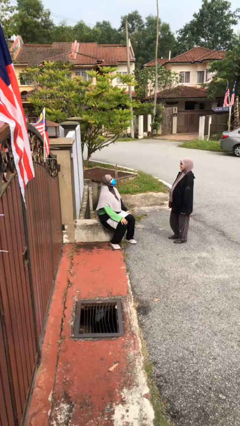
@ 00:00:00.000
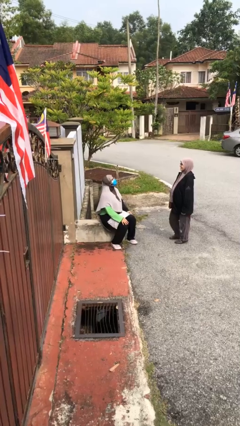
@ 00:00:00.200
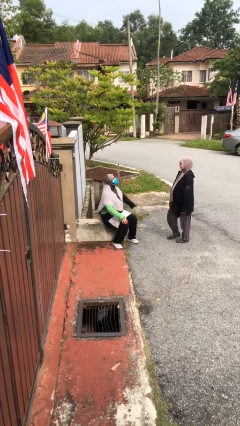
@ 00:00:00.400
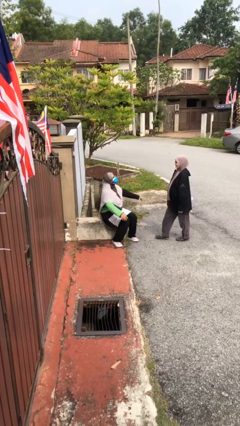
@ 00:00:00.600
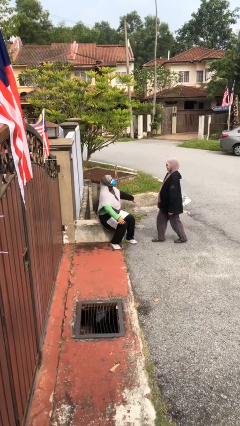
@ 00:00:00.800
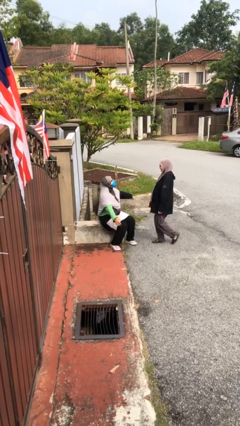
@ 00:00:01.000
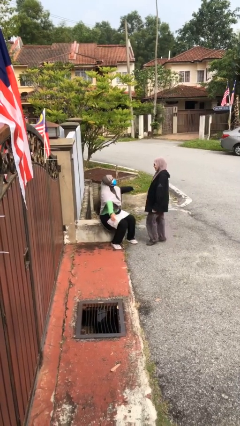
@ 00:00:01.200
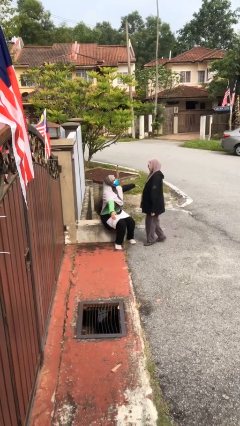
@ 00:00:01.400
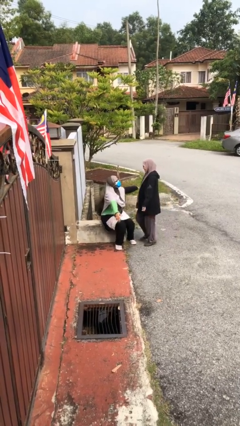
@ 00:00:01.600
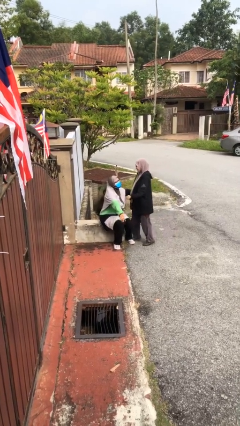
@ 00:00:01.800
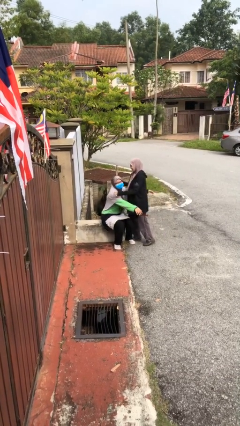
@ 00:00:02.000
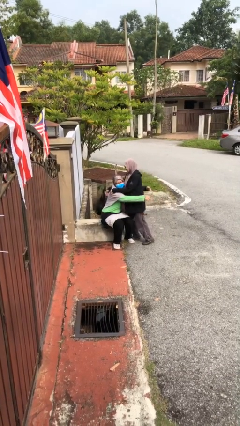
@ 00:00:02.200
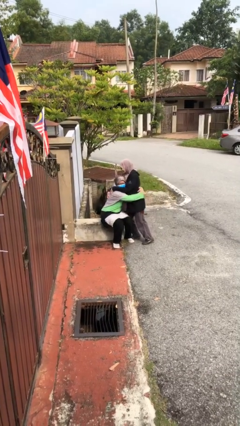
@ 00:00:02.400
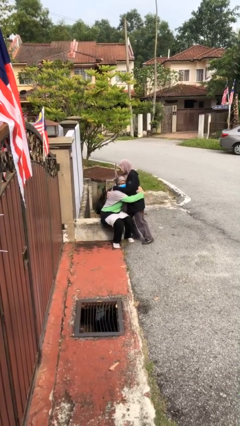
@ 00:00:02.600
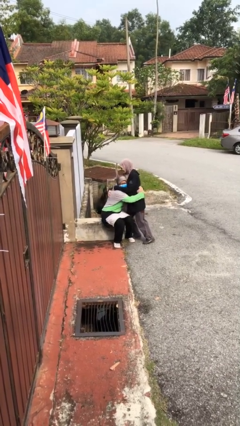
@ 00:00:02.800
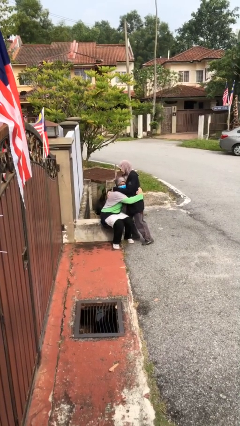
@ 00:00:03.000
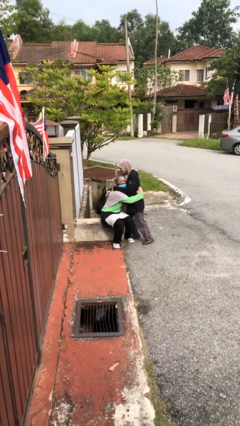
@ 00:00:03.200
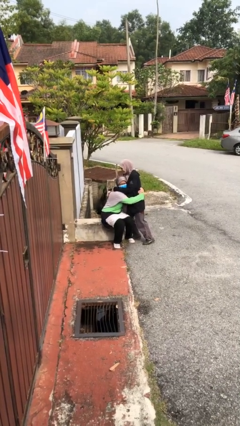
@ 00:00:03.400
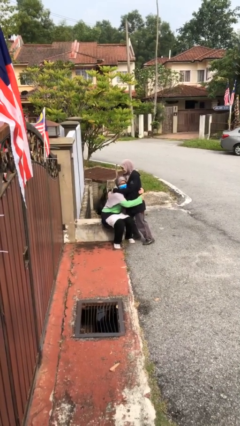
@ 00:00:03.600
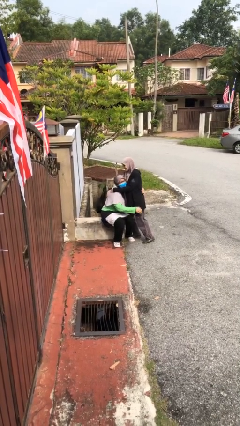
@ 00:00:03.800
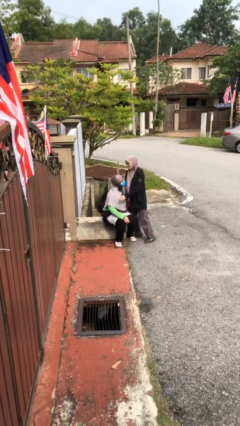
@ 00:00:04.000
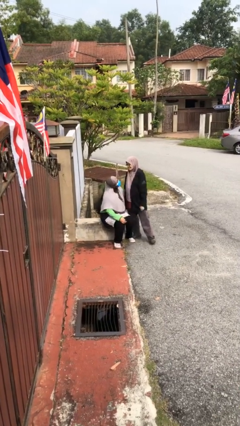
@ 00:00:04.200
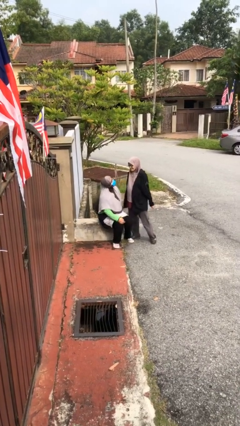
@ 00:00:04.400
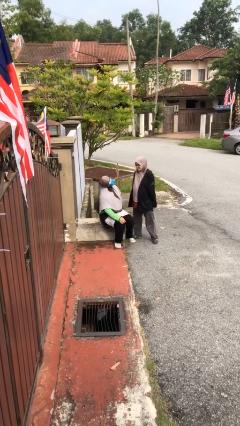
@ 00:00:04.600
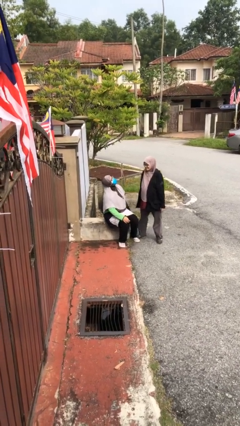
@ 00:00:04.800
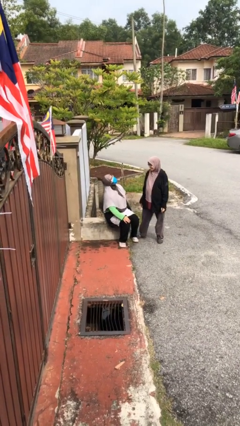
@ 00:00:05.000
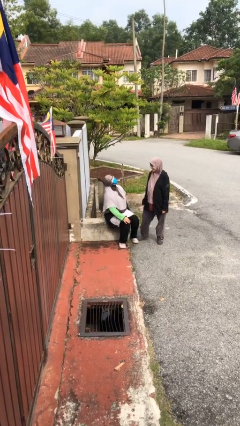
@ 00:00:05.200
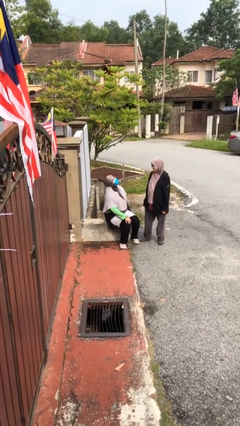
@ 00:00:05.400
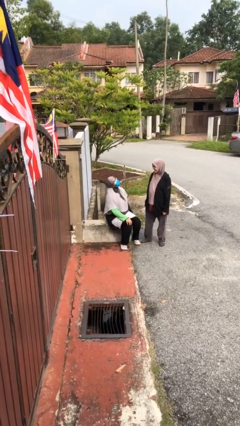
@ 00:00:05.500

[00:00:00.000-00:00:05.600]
person embraces person

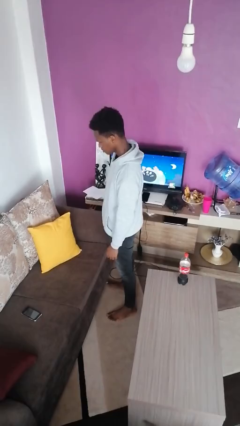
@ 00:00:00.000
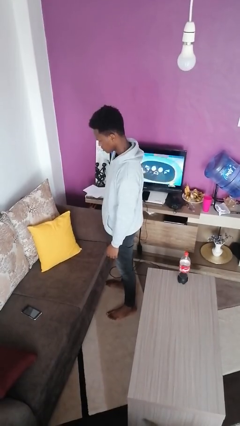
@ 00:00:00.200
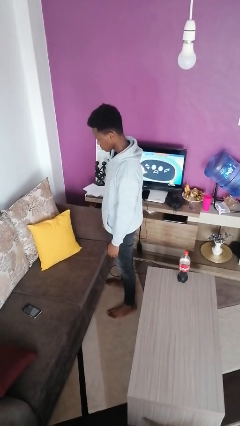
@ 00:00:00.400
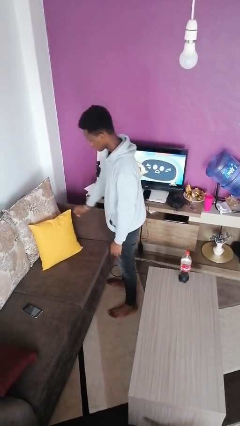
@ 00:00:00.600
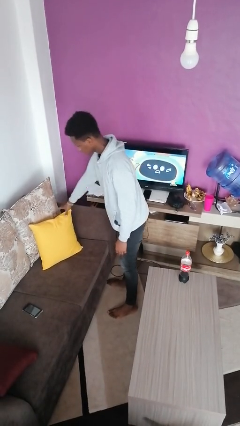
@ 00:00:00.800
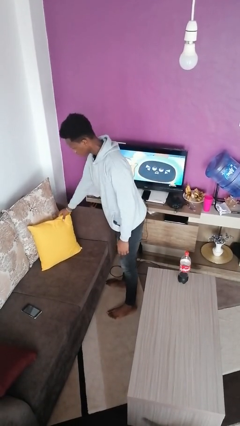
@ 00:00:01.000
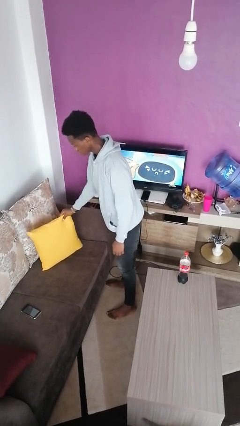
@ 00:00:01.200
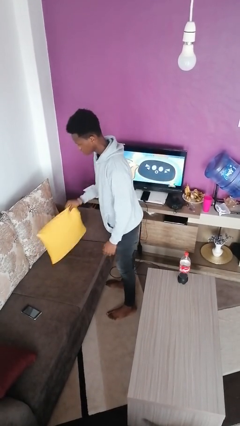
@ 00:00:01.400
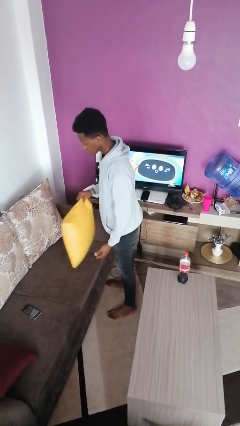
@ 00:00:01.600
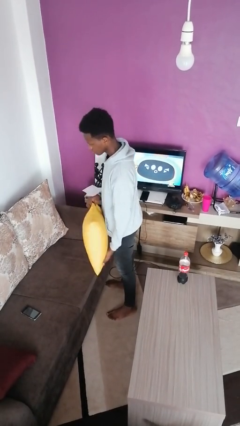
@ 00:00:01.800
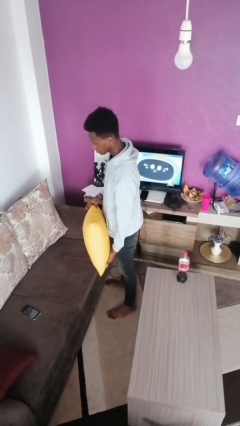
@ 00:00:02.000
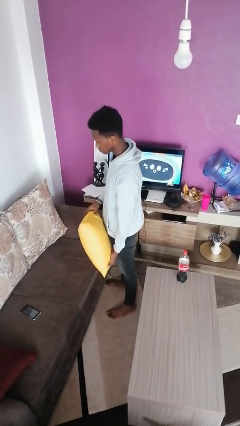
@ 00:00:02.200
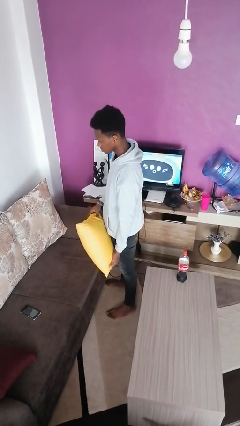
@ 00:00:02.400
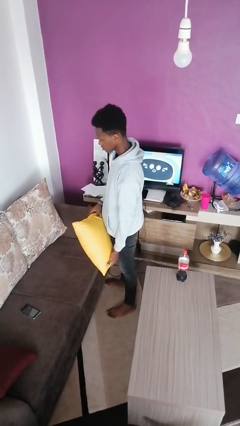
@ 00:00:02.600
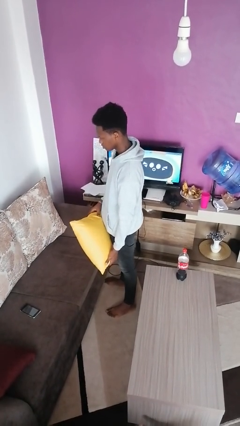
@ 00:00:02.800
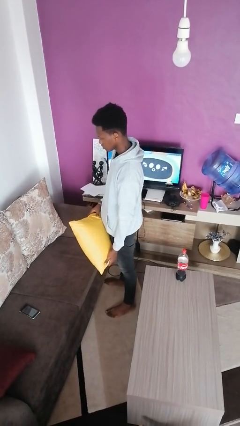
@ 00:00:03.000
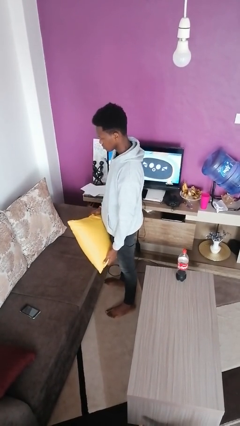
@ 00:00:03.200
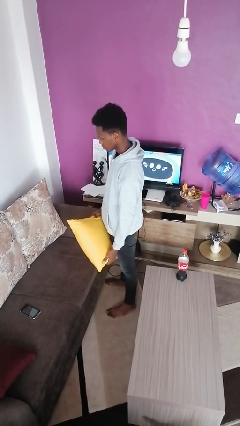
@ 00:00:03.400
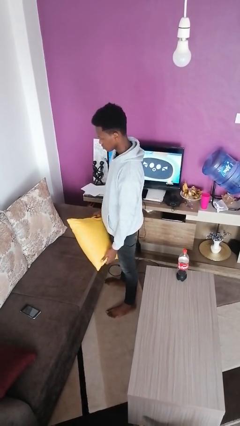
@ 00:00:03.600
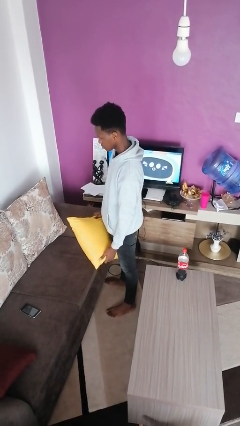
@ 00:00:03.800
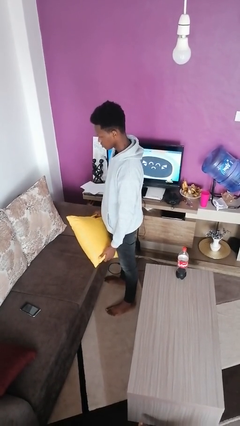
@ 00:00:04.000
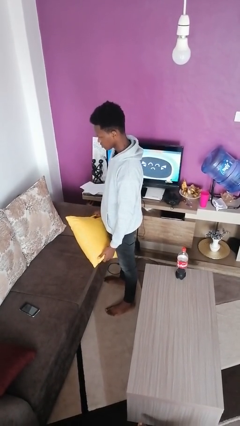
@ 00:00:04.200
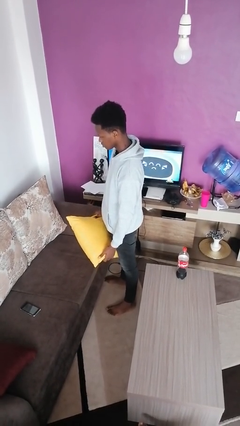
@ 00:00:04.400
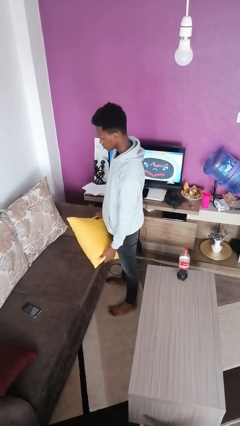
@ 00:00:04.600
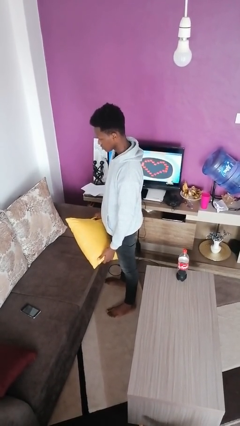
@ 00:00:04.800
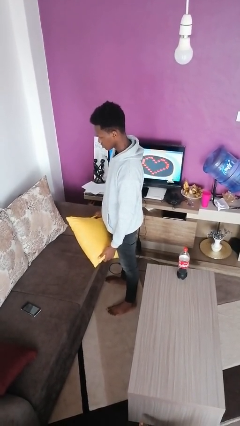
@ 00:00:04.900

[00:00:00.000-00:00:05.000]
person picks up object from couch

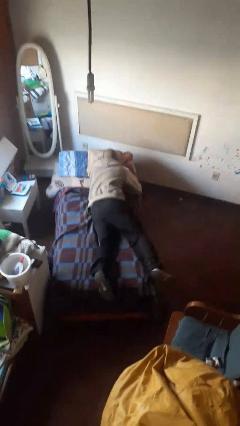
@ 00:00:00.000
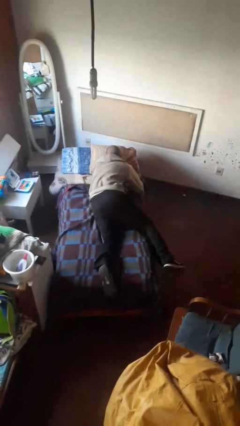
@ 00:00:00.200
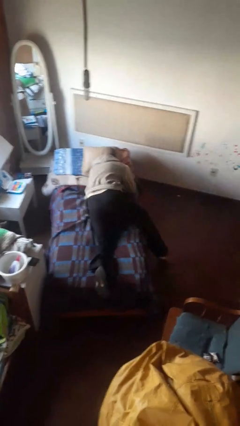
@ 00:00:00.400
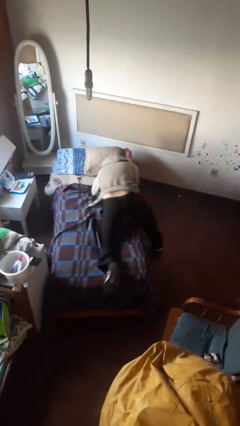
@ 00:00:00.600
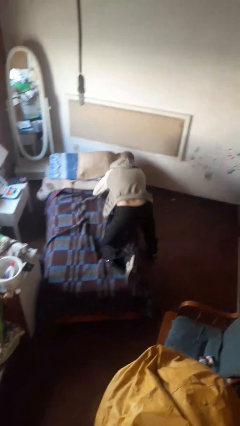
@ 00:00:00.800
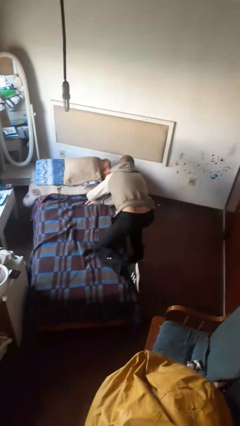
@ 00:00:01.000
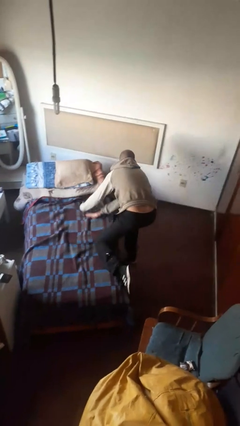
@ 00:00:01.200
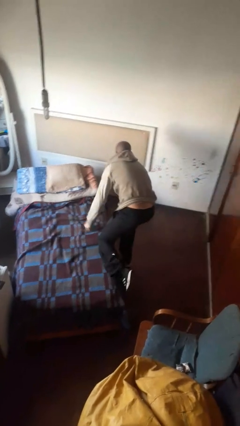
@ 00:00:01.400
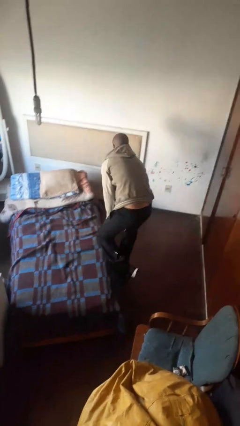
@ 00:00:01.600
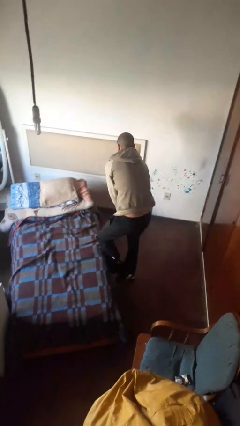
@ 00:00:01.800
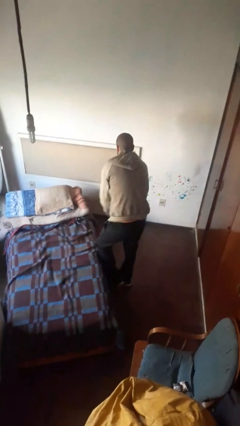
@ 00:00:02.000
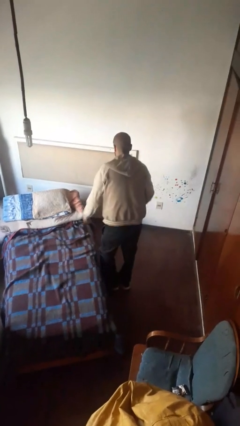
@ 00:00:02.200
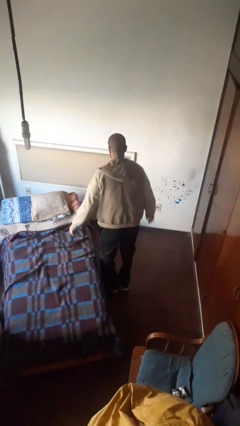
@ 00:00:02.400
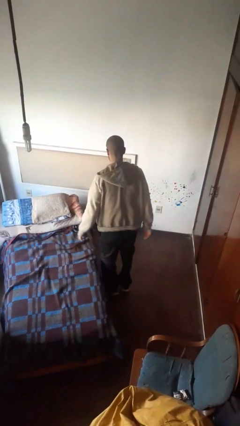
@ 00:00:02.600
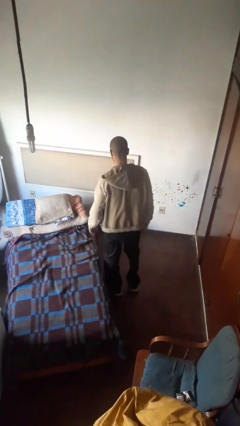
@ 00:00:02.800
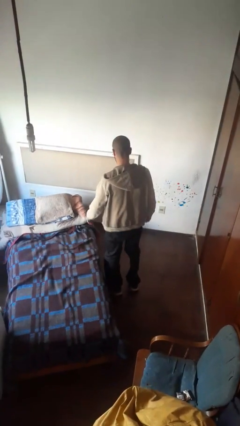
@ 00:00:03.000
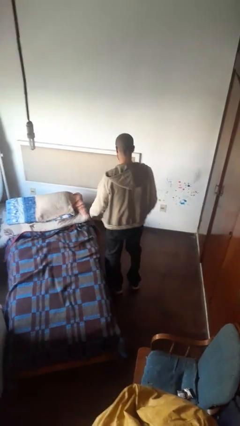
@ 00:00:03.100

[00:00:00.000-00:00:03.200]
person stands up

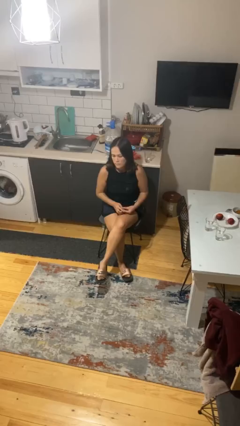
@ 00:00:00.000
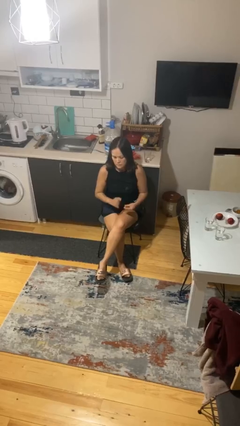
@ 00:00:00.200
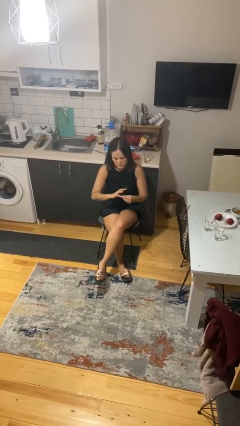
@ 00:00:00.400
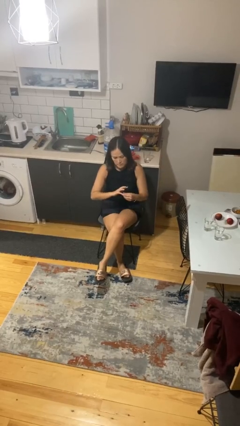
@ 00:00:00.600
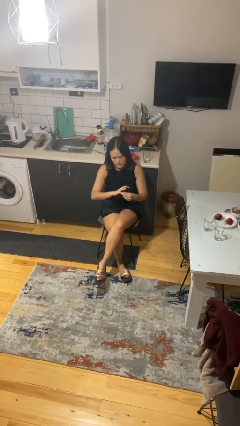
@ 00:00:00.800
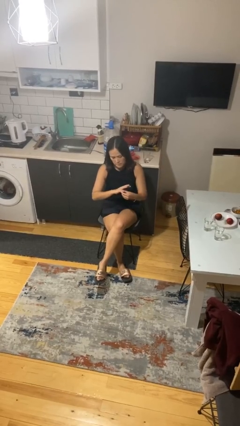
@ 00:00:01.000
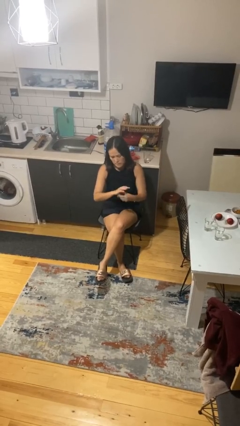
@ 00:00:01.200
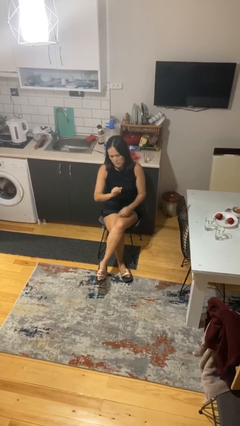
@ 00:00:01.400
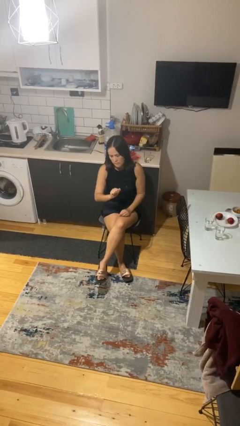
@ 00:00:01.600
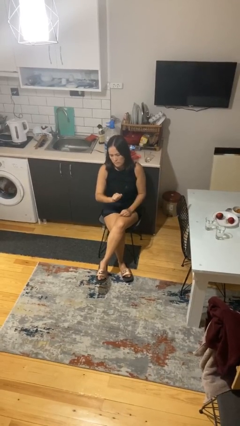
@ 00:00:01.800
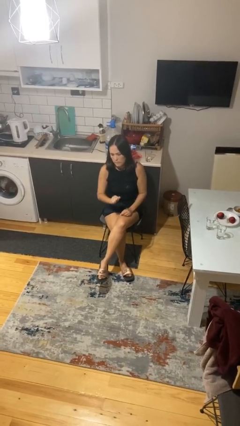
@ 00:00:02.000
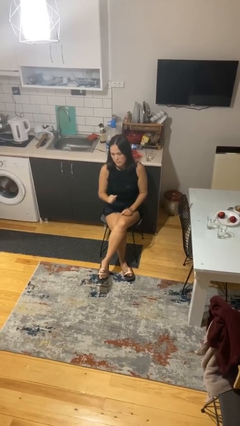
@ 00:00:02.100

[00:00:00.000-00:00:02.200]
person puts on ring

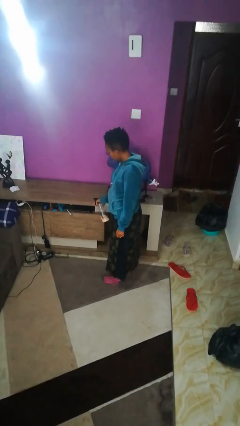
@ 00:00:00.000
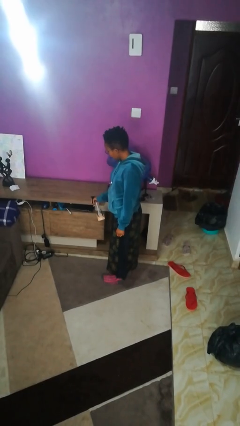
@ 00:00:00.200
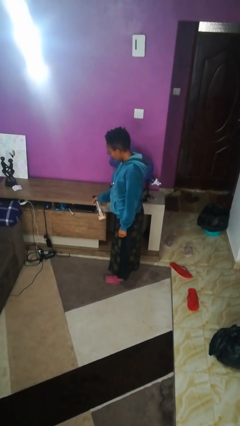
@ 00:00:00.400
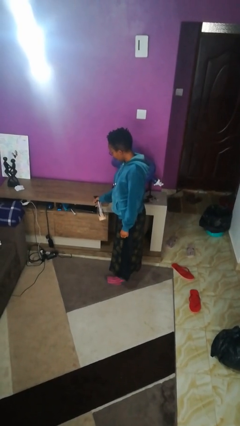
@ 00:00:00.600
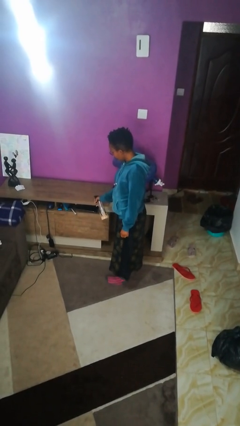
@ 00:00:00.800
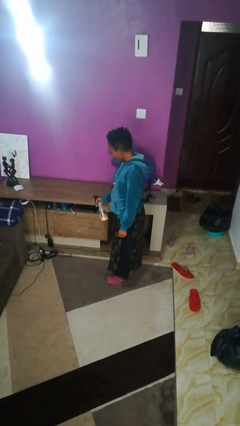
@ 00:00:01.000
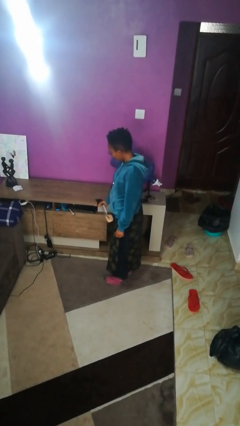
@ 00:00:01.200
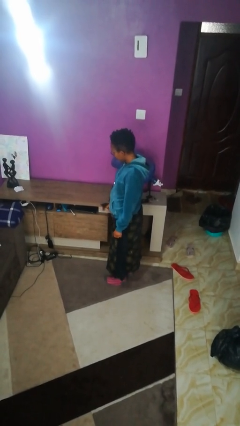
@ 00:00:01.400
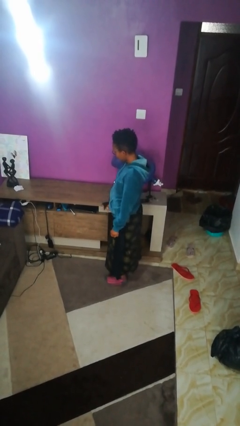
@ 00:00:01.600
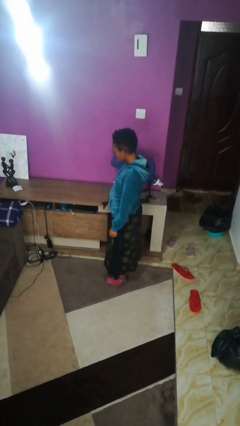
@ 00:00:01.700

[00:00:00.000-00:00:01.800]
person sprays from bottle
